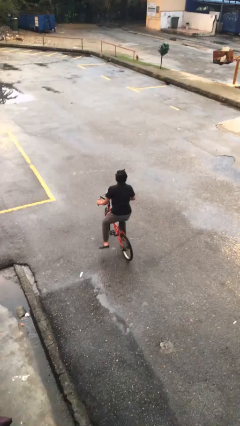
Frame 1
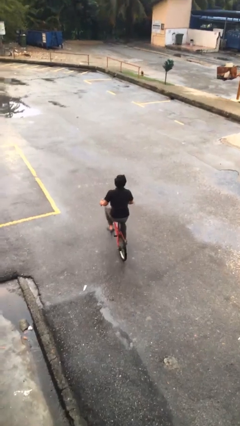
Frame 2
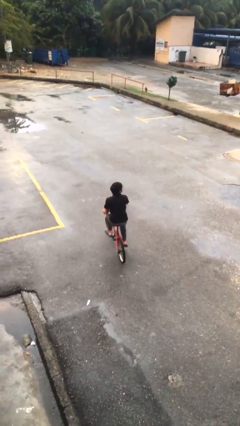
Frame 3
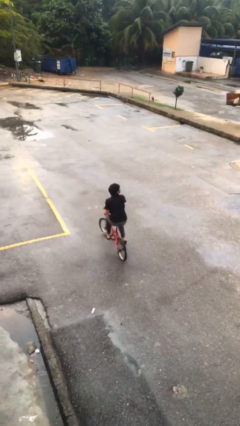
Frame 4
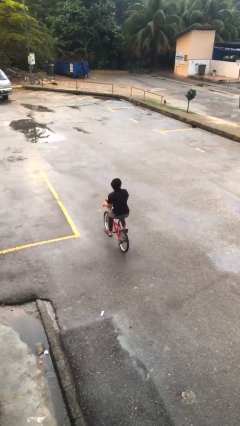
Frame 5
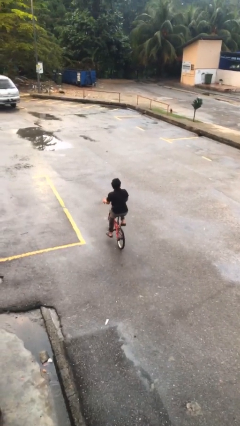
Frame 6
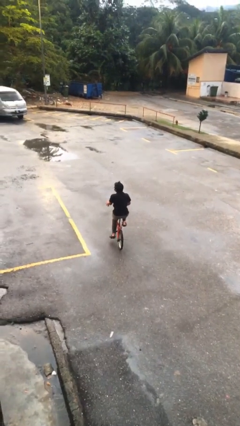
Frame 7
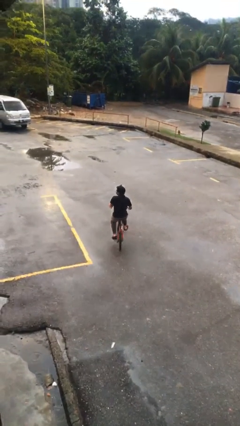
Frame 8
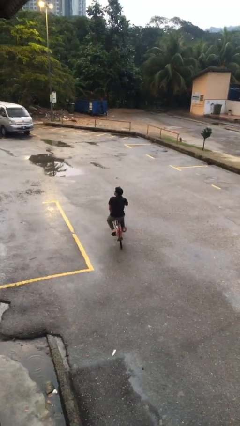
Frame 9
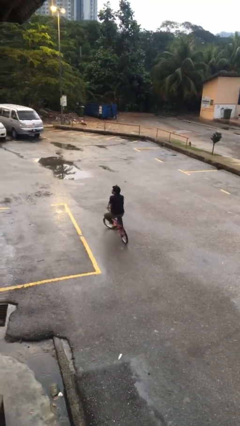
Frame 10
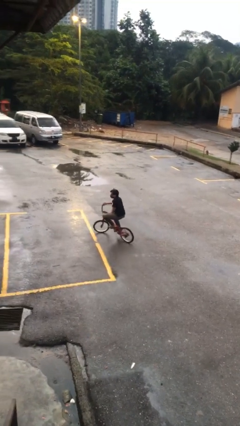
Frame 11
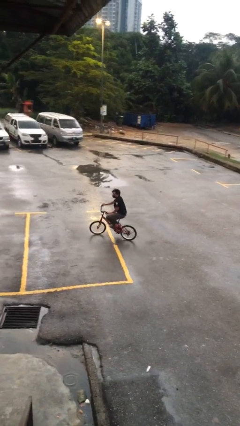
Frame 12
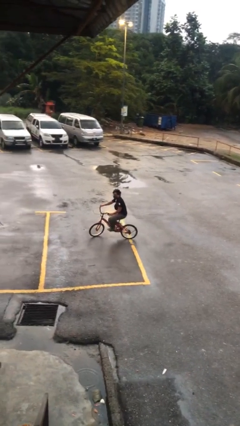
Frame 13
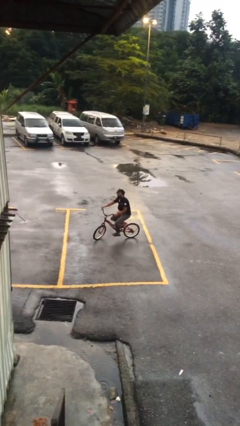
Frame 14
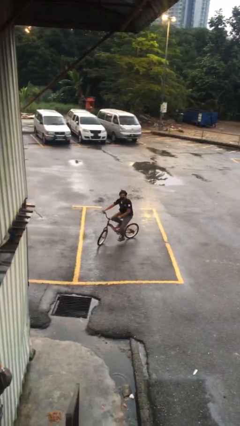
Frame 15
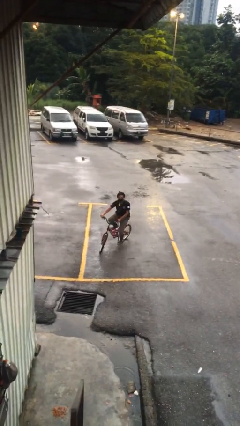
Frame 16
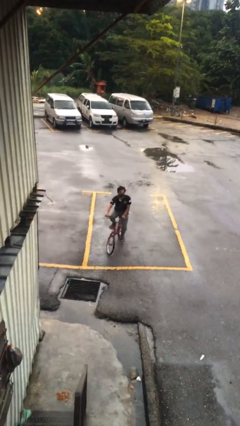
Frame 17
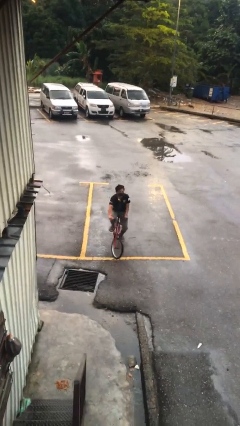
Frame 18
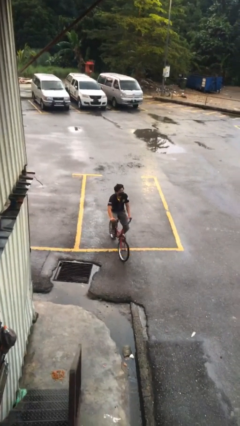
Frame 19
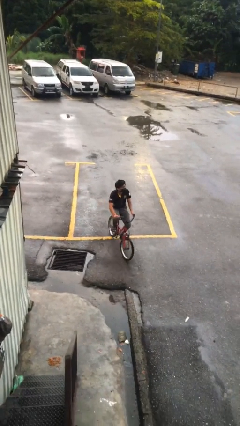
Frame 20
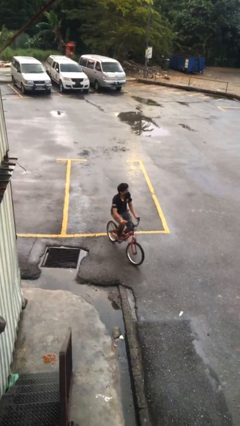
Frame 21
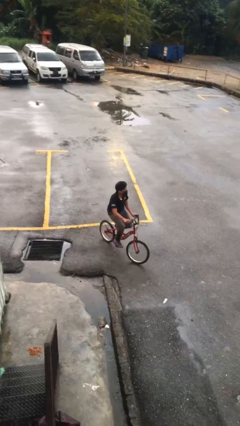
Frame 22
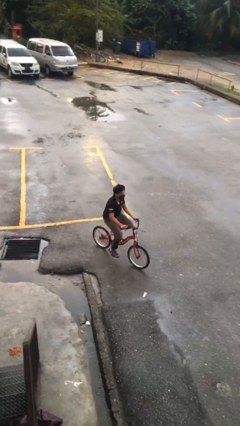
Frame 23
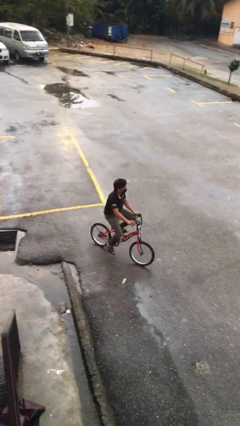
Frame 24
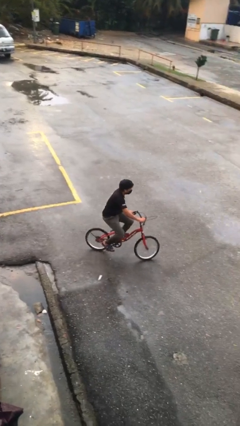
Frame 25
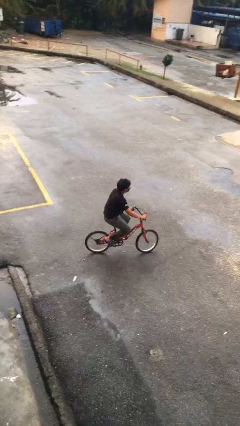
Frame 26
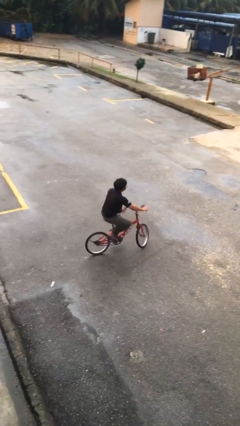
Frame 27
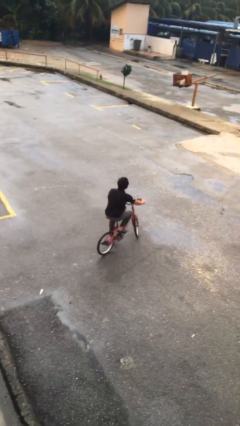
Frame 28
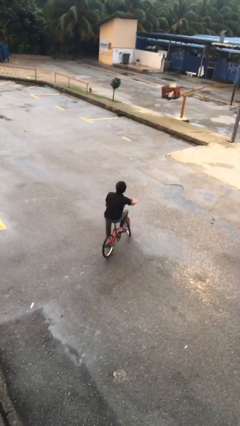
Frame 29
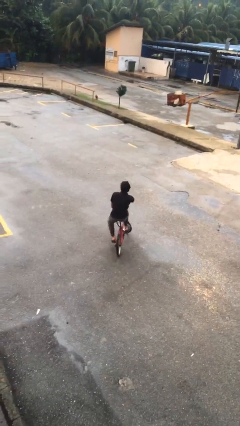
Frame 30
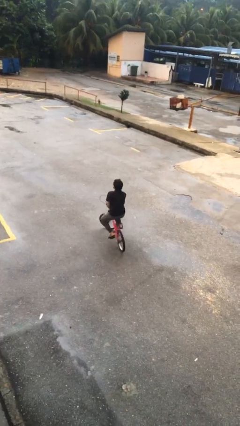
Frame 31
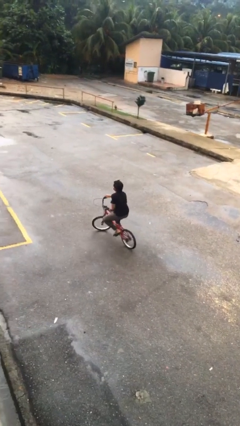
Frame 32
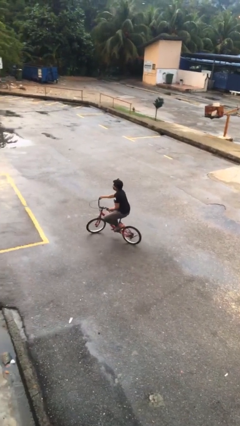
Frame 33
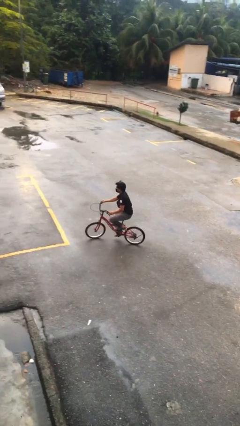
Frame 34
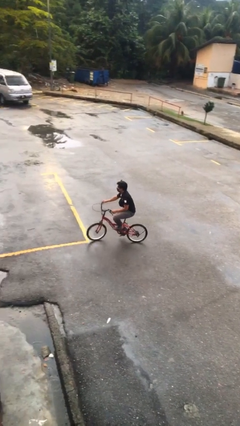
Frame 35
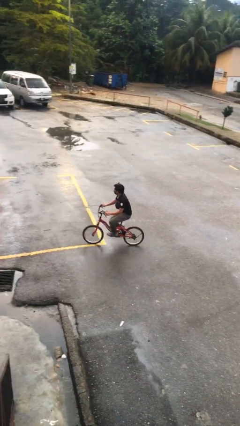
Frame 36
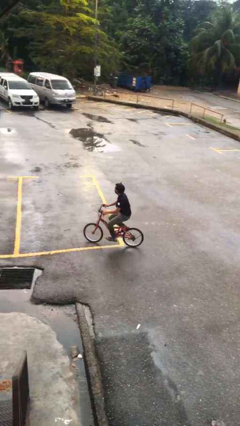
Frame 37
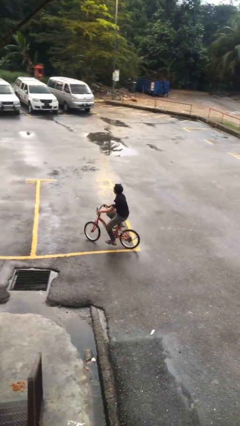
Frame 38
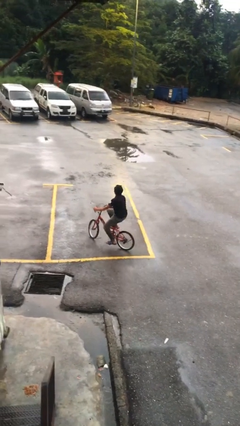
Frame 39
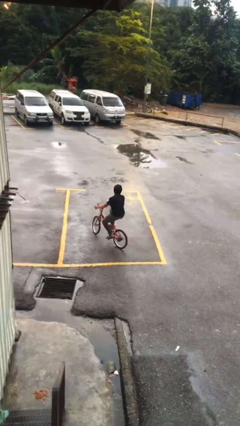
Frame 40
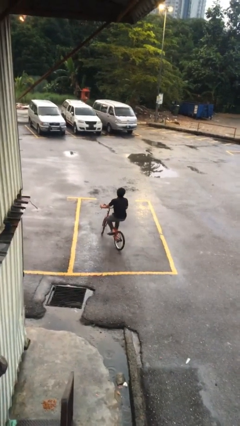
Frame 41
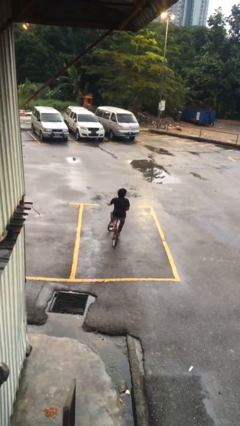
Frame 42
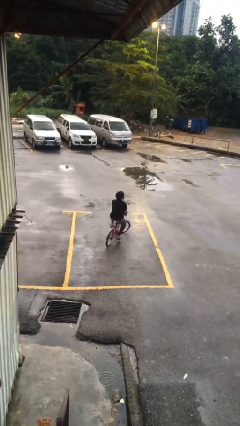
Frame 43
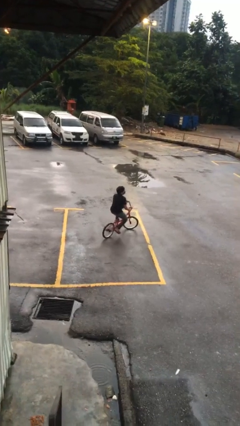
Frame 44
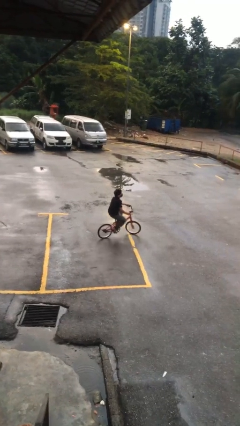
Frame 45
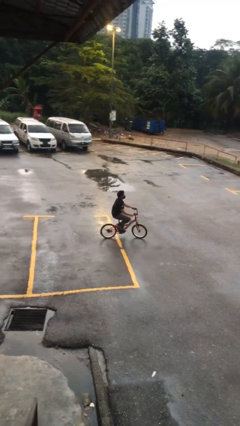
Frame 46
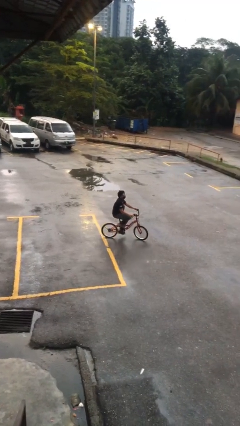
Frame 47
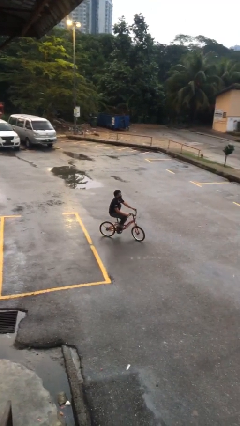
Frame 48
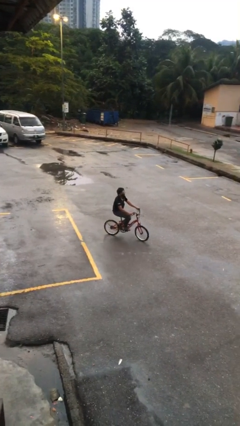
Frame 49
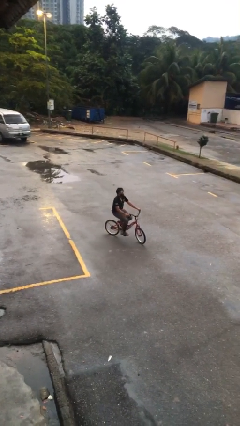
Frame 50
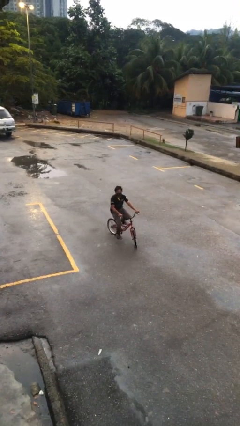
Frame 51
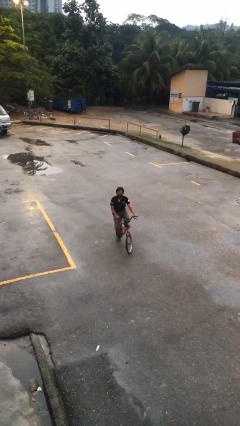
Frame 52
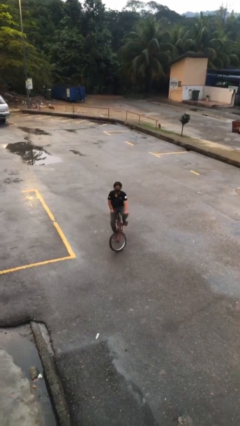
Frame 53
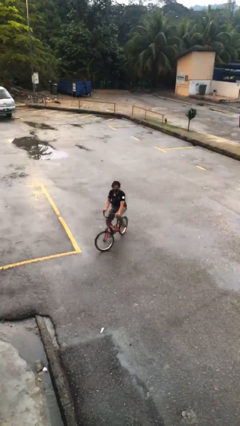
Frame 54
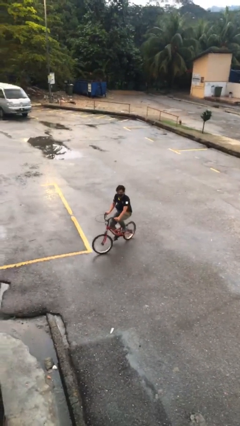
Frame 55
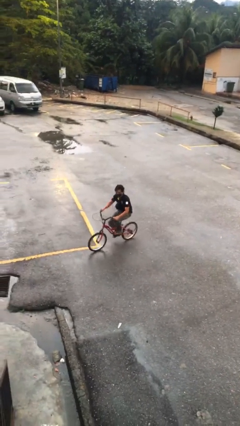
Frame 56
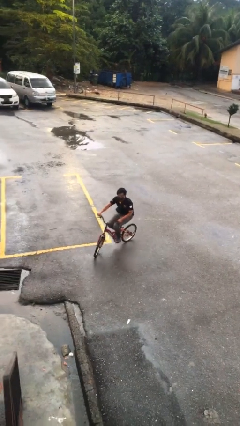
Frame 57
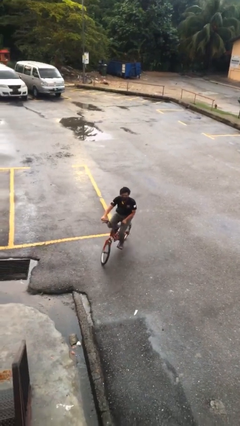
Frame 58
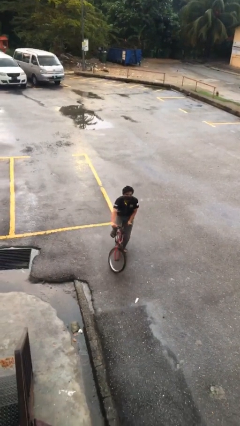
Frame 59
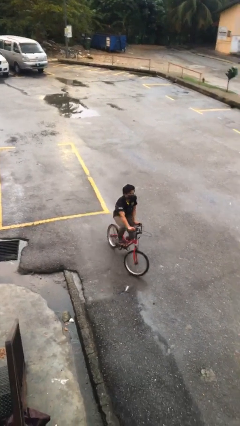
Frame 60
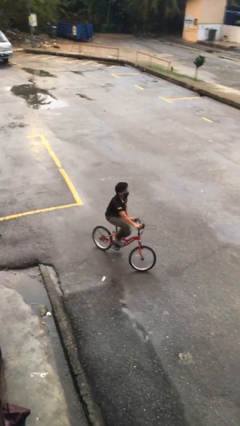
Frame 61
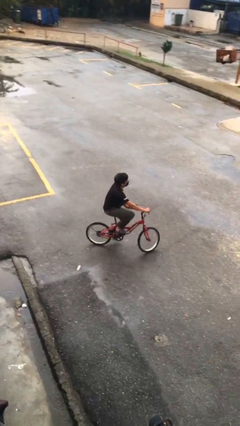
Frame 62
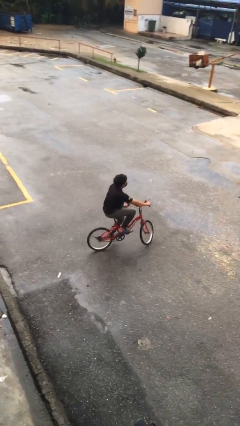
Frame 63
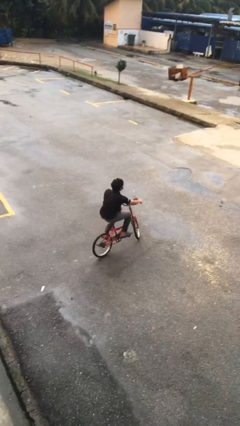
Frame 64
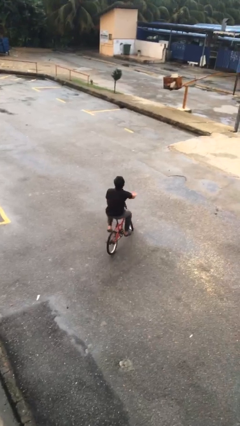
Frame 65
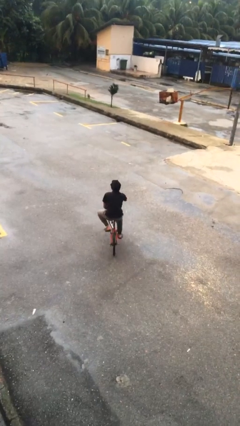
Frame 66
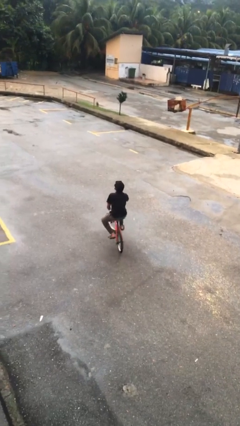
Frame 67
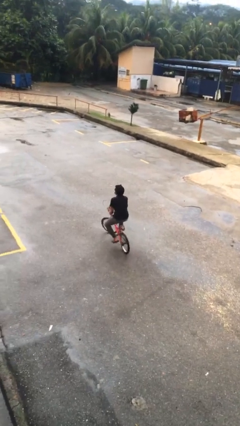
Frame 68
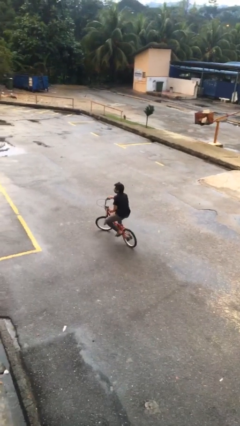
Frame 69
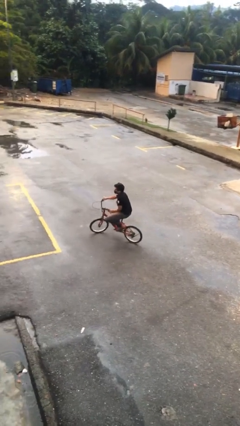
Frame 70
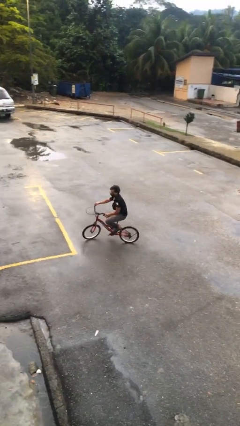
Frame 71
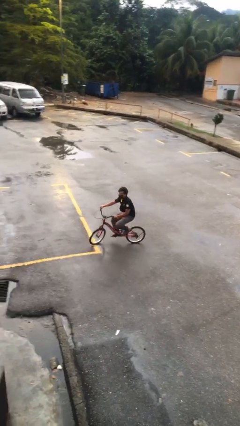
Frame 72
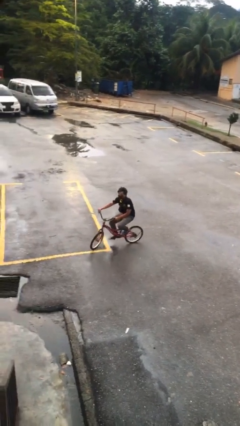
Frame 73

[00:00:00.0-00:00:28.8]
person rides bicycle

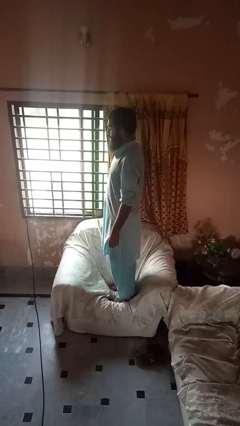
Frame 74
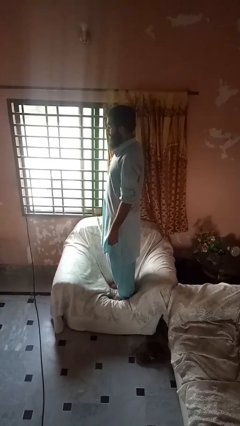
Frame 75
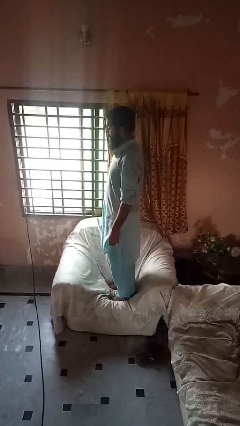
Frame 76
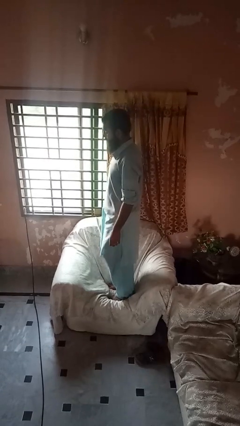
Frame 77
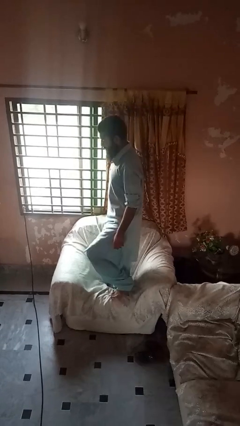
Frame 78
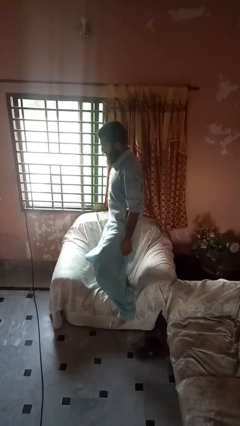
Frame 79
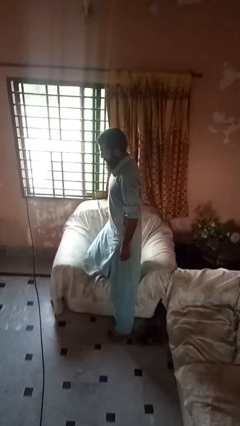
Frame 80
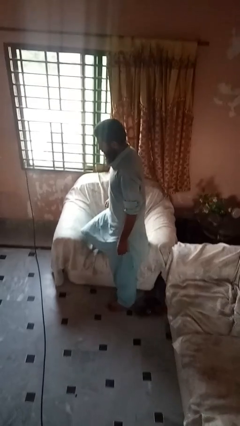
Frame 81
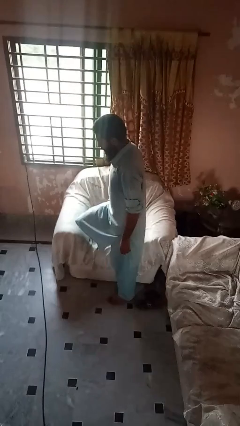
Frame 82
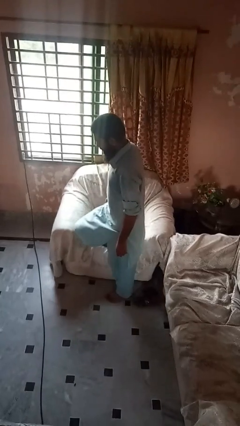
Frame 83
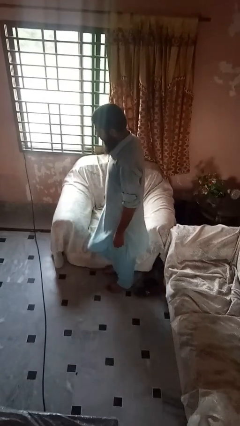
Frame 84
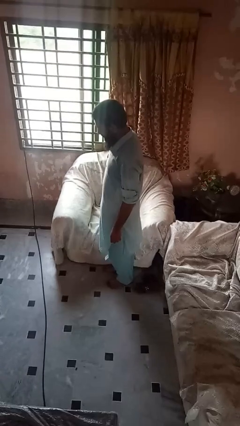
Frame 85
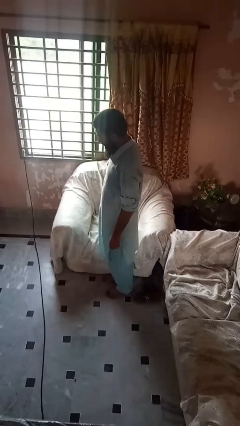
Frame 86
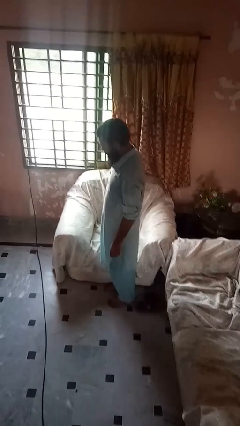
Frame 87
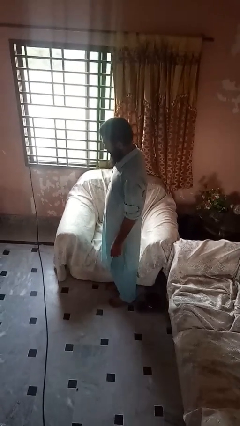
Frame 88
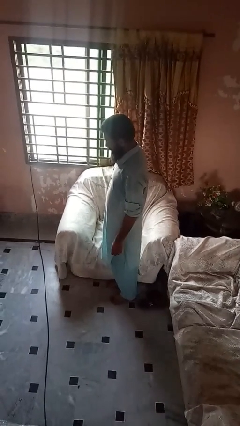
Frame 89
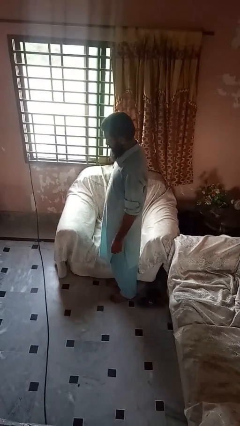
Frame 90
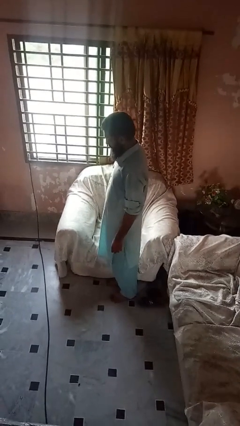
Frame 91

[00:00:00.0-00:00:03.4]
person climbs off couch

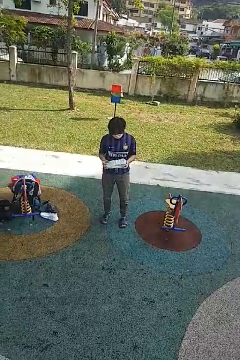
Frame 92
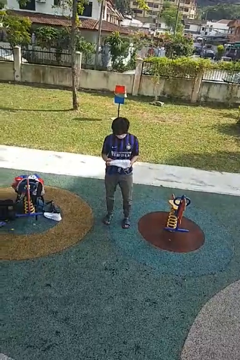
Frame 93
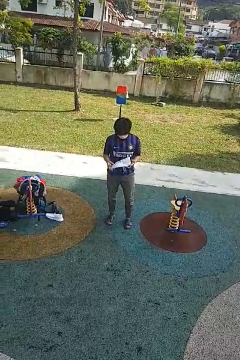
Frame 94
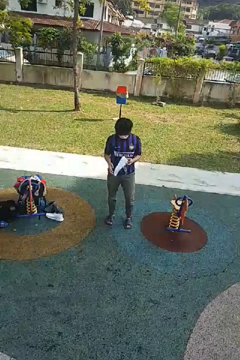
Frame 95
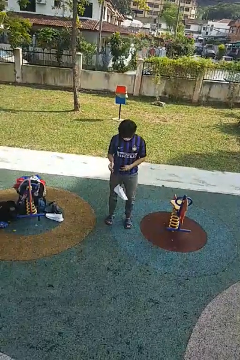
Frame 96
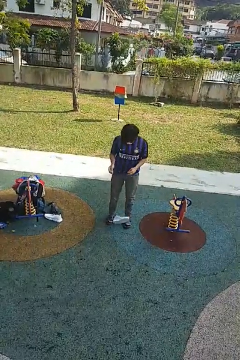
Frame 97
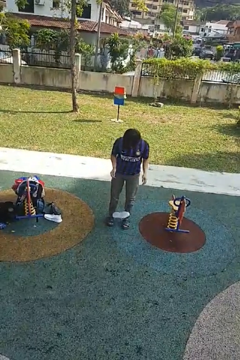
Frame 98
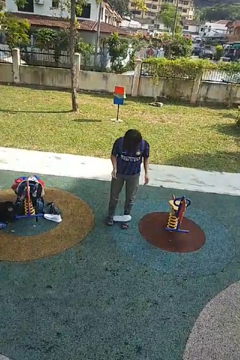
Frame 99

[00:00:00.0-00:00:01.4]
person drops object
